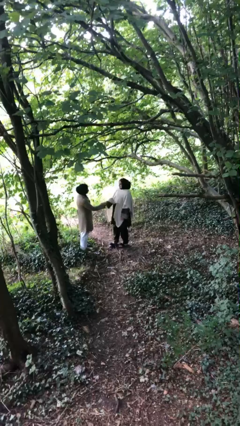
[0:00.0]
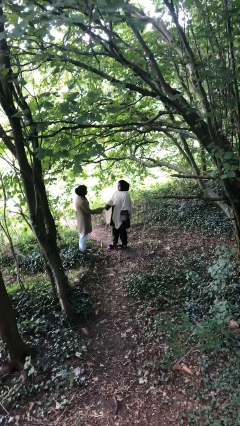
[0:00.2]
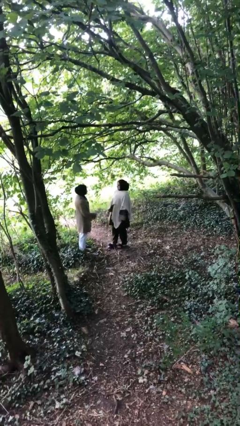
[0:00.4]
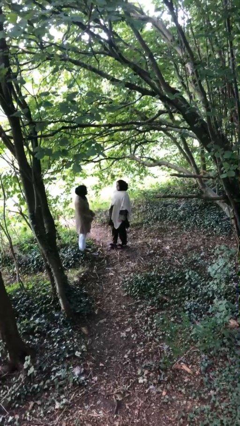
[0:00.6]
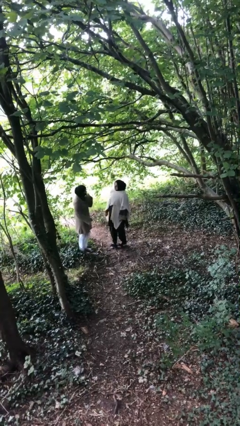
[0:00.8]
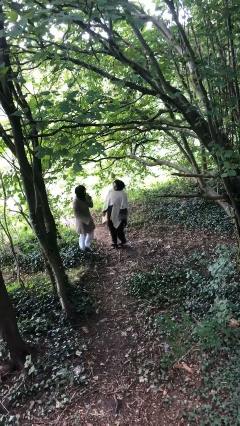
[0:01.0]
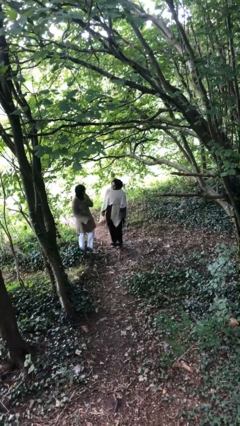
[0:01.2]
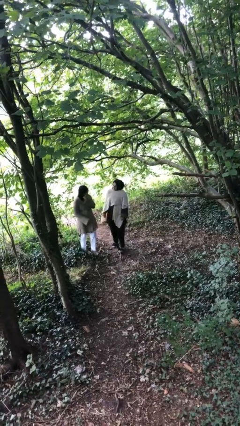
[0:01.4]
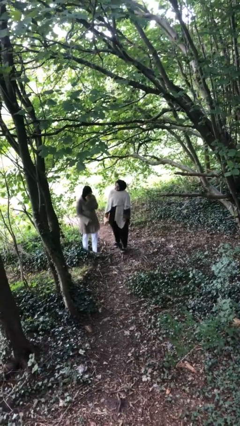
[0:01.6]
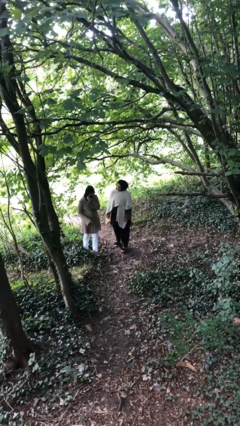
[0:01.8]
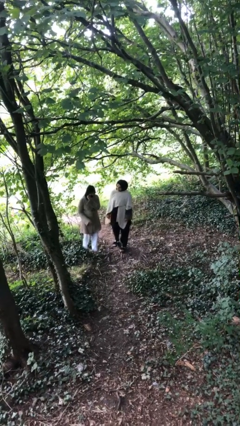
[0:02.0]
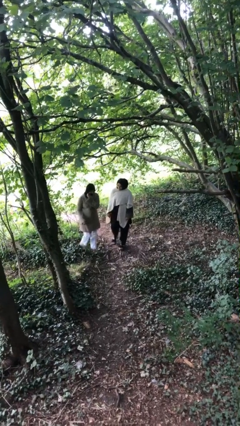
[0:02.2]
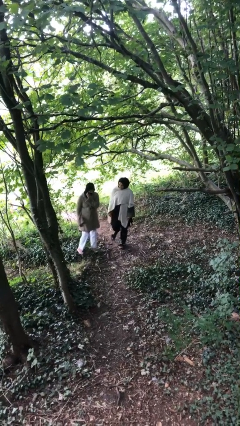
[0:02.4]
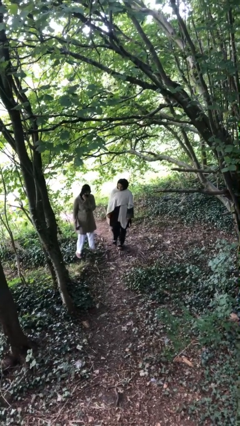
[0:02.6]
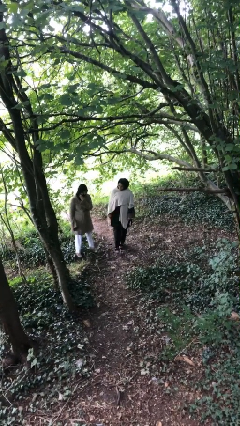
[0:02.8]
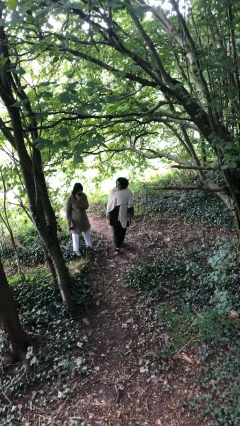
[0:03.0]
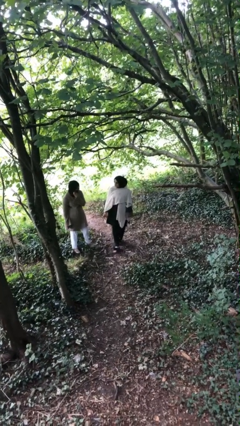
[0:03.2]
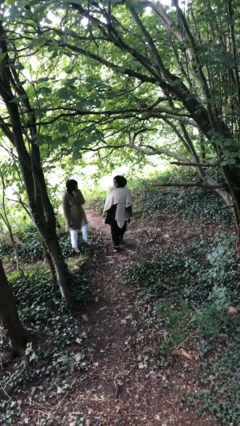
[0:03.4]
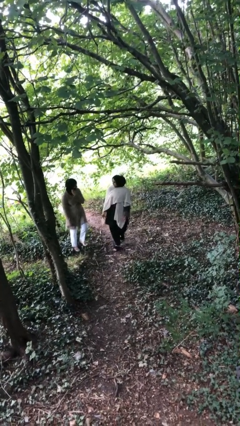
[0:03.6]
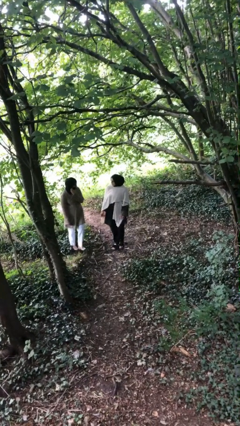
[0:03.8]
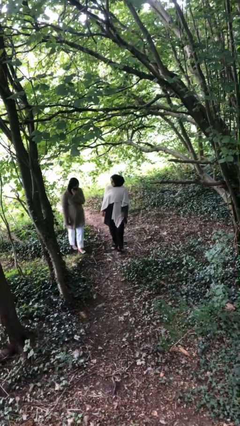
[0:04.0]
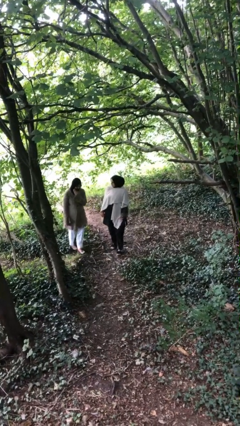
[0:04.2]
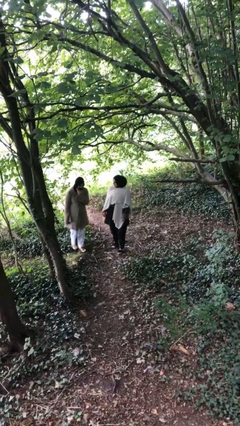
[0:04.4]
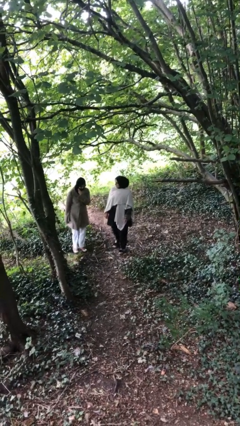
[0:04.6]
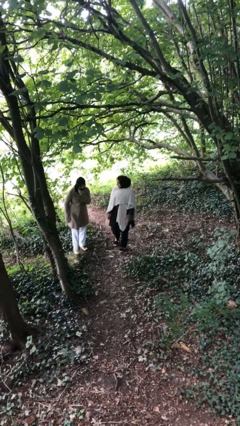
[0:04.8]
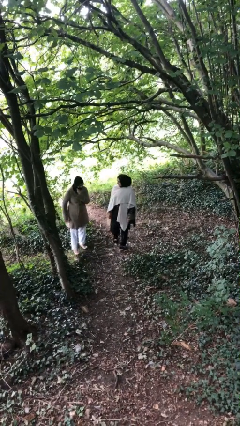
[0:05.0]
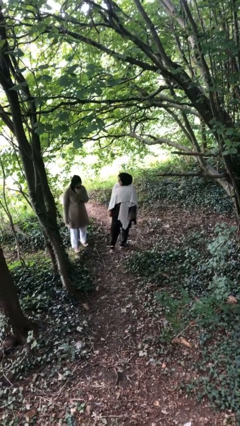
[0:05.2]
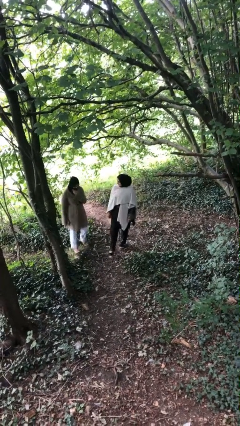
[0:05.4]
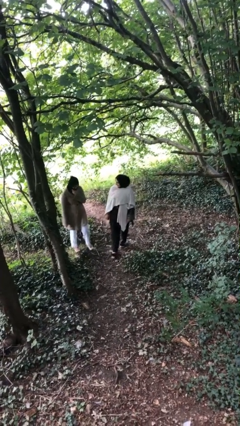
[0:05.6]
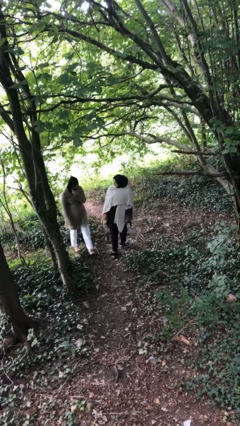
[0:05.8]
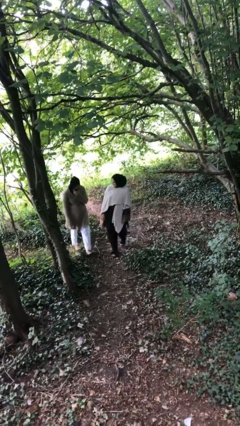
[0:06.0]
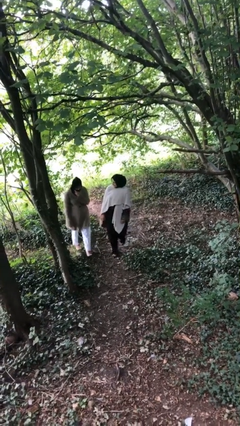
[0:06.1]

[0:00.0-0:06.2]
person talks to person

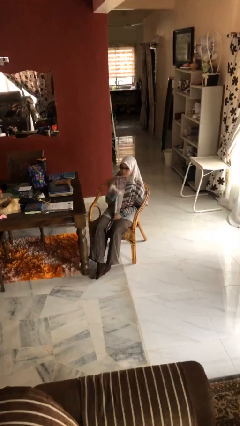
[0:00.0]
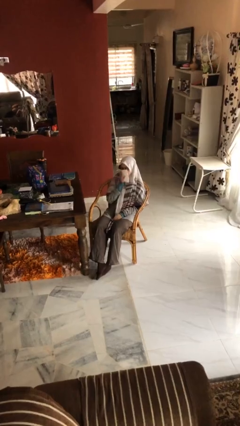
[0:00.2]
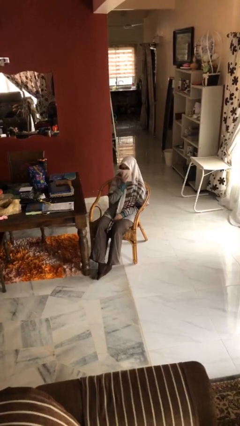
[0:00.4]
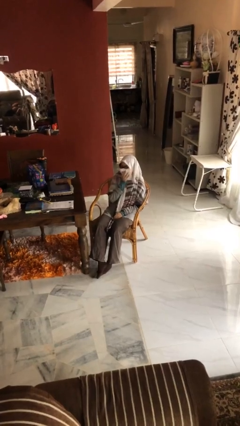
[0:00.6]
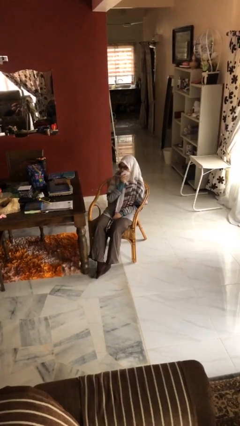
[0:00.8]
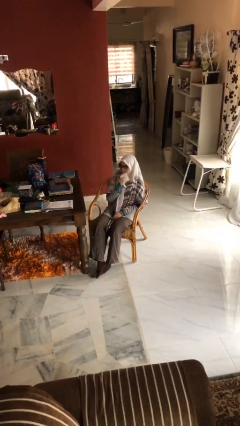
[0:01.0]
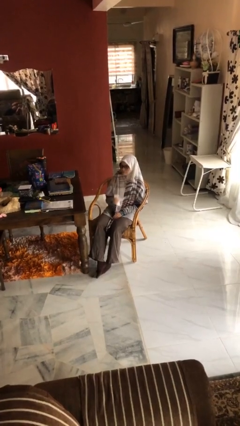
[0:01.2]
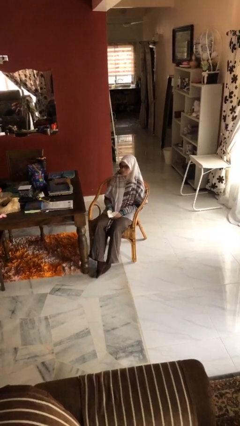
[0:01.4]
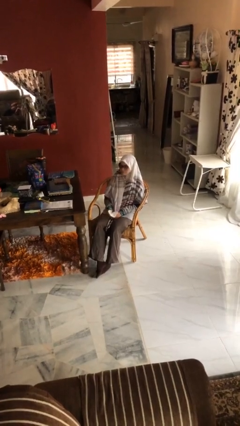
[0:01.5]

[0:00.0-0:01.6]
person wipes mouth with napkin

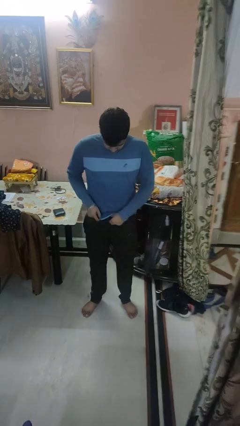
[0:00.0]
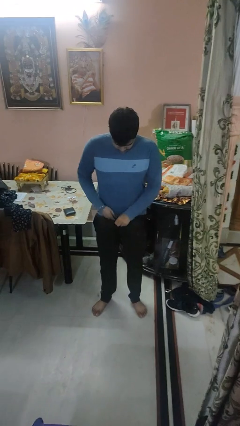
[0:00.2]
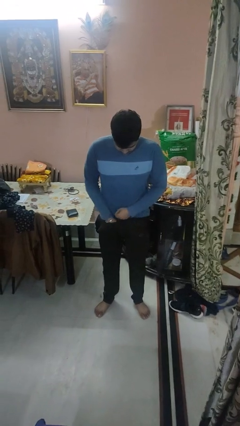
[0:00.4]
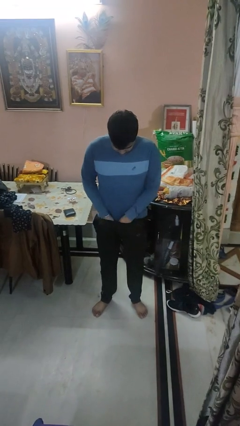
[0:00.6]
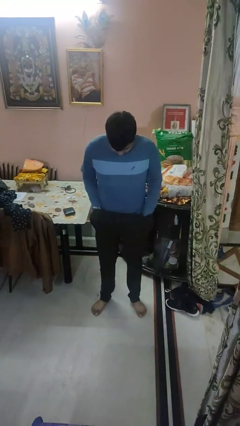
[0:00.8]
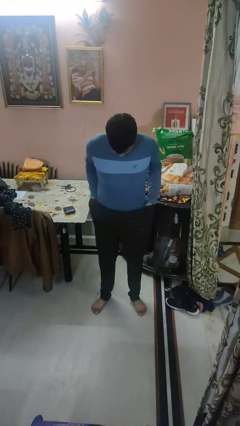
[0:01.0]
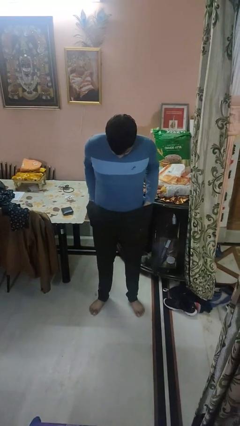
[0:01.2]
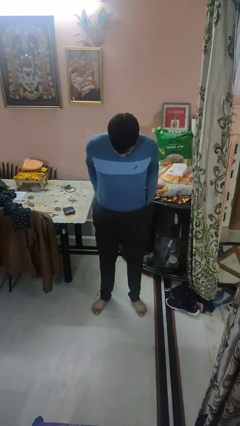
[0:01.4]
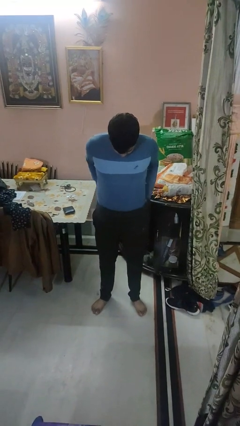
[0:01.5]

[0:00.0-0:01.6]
person tucks in shirt

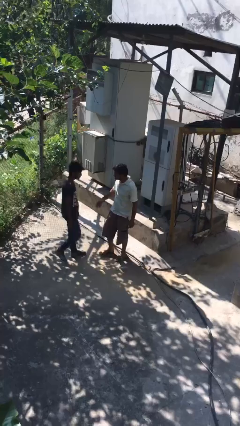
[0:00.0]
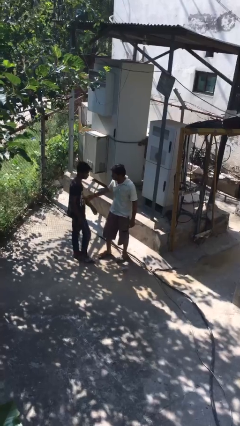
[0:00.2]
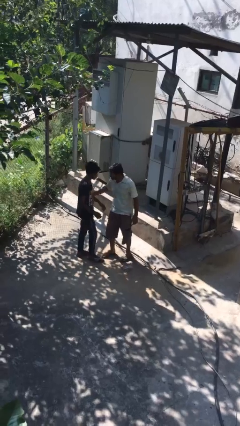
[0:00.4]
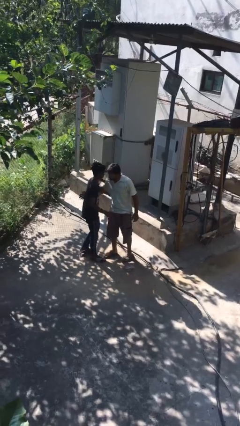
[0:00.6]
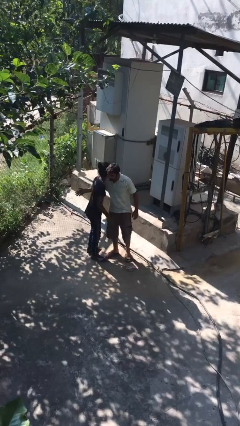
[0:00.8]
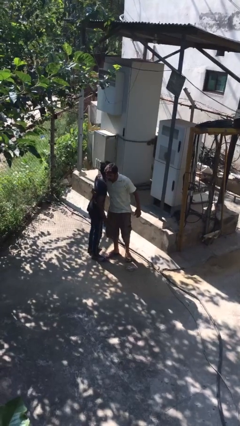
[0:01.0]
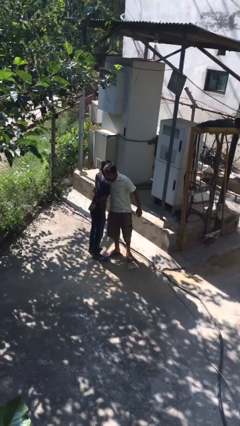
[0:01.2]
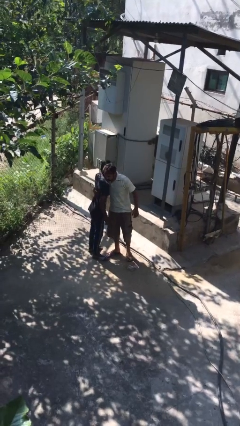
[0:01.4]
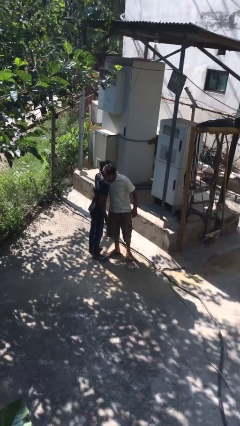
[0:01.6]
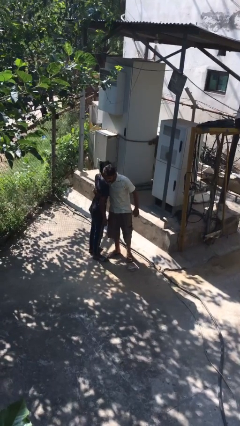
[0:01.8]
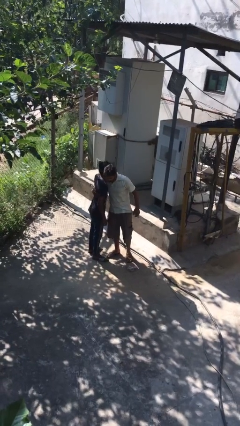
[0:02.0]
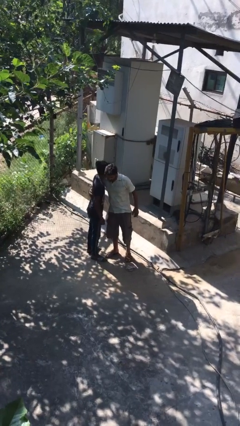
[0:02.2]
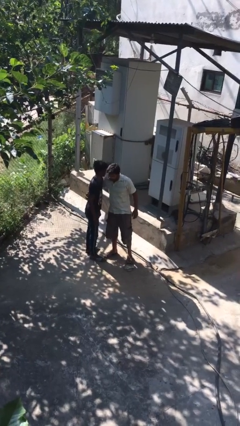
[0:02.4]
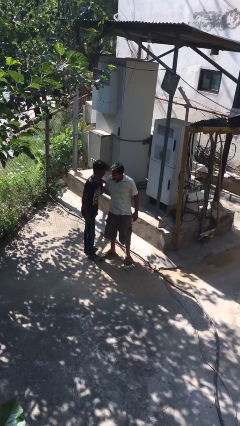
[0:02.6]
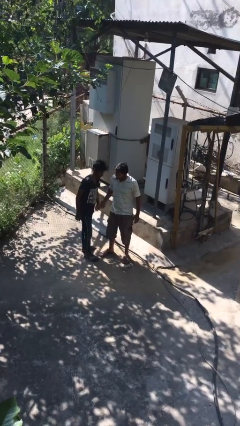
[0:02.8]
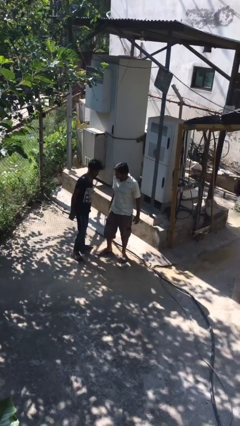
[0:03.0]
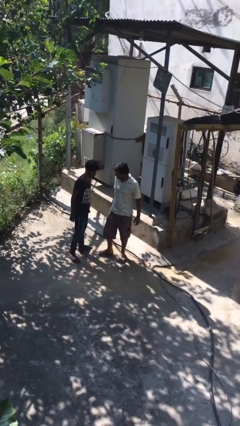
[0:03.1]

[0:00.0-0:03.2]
person embraces person

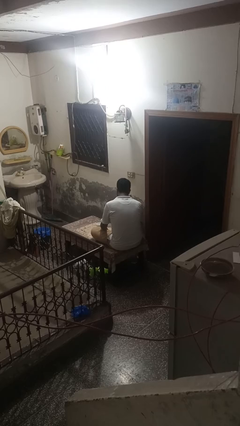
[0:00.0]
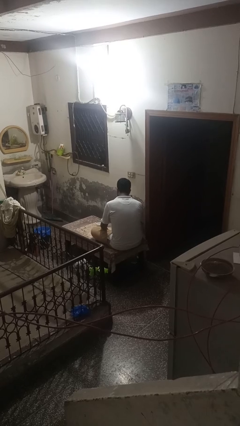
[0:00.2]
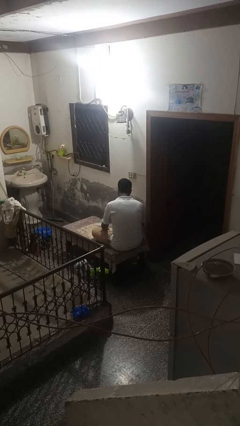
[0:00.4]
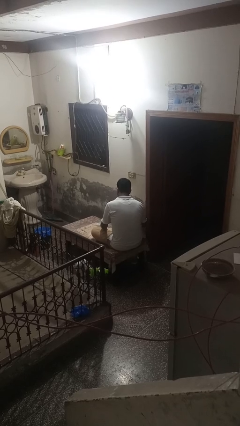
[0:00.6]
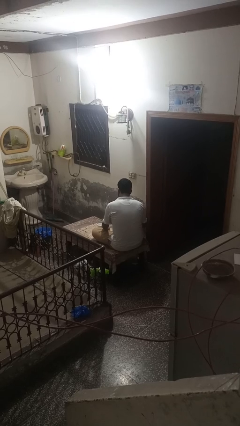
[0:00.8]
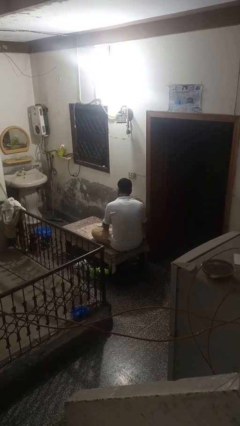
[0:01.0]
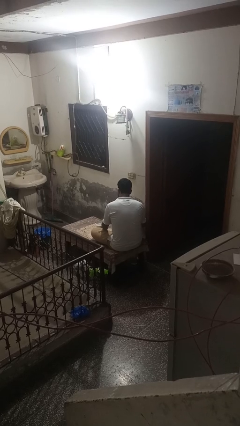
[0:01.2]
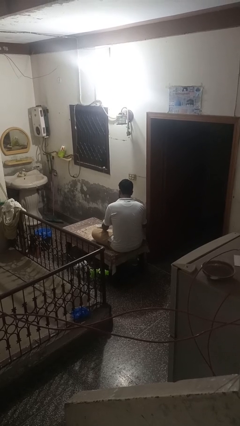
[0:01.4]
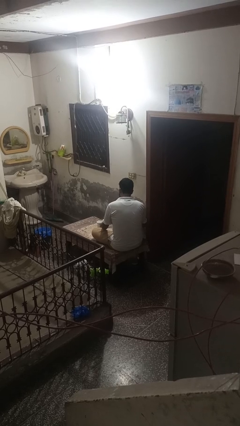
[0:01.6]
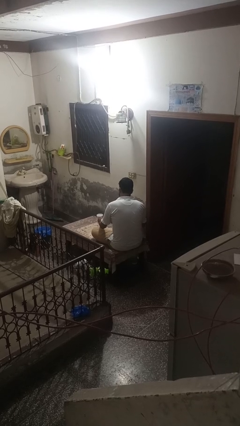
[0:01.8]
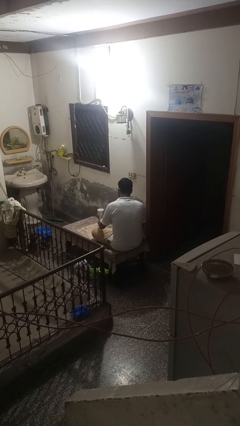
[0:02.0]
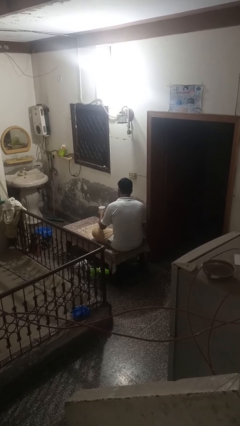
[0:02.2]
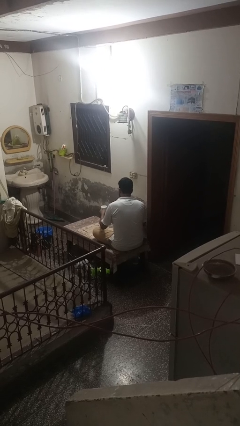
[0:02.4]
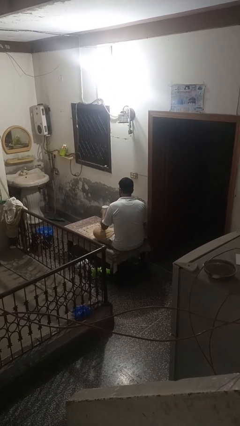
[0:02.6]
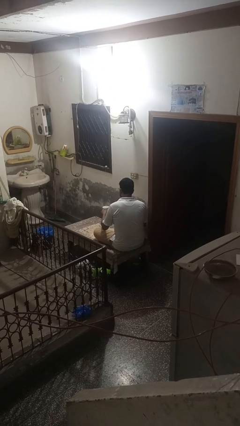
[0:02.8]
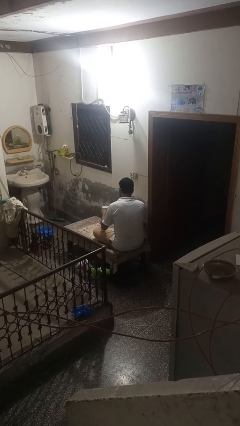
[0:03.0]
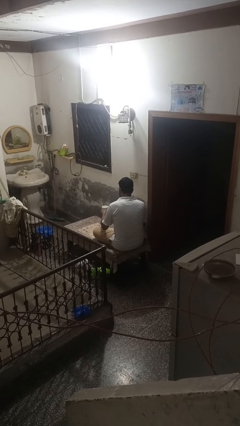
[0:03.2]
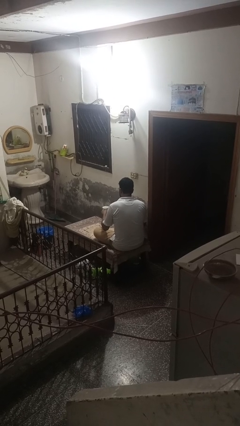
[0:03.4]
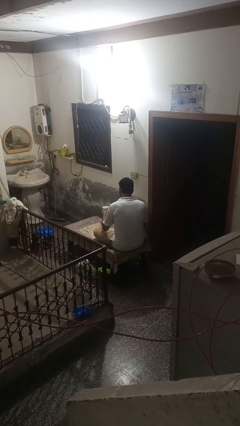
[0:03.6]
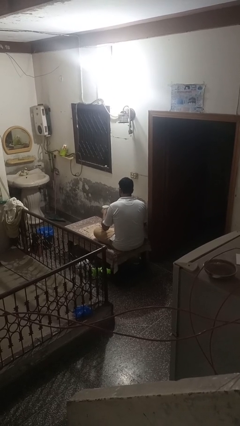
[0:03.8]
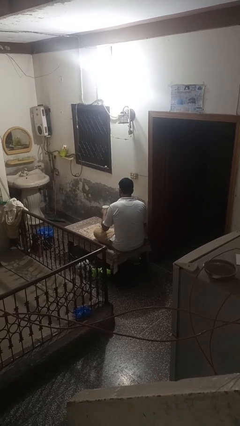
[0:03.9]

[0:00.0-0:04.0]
person picks up object from table

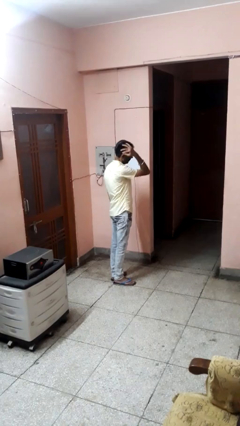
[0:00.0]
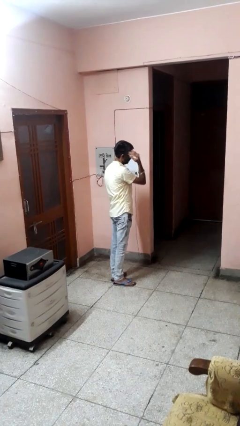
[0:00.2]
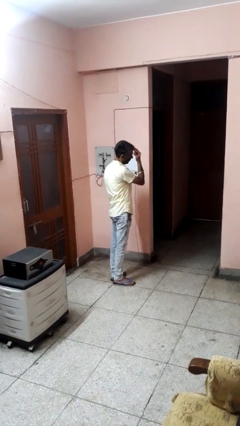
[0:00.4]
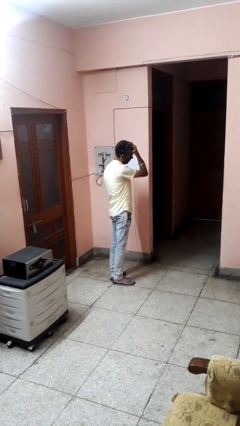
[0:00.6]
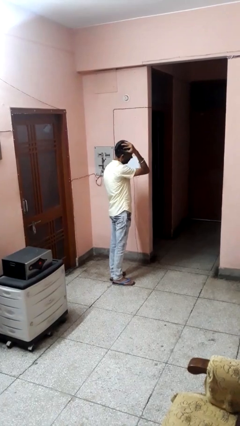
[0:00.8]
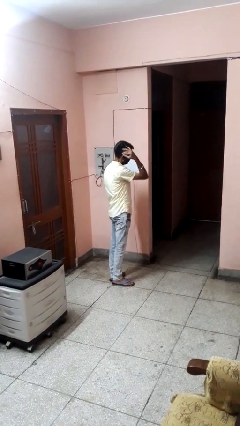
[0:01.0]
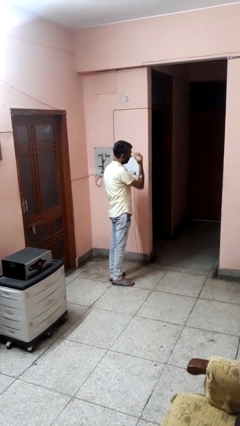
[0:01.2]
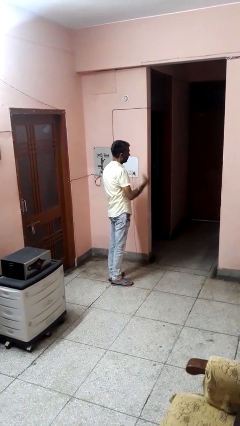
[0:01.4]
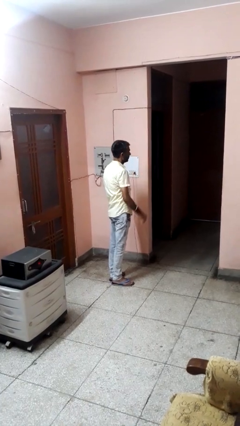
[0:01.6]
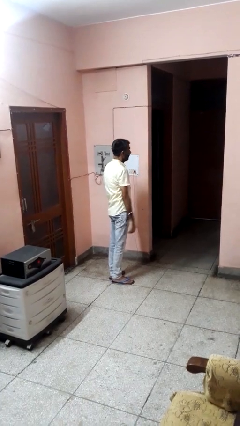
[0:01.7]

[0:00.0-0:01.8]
person strokes hair
